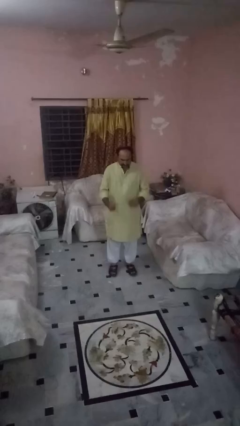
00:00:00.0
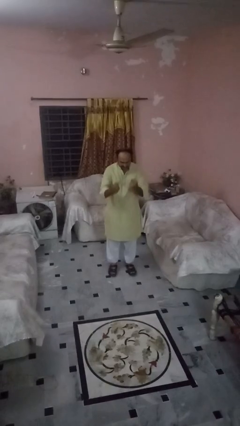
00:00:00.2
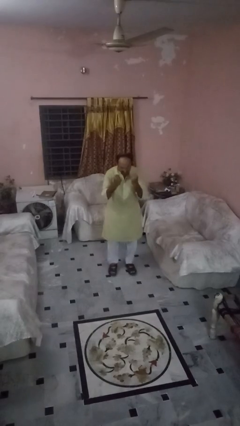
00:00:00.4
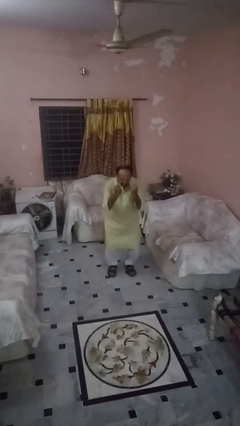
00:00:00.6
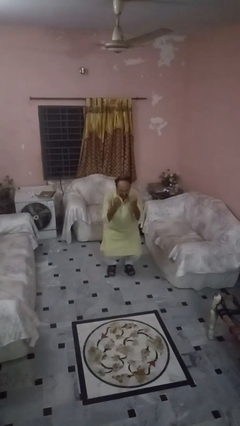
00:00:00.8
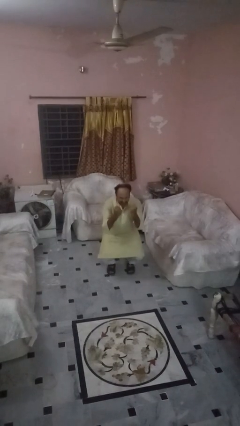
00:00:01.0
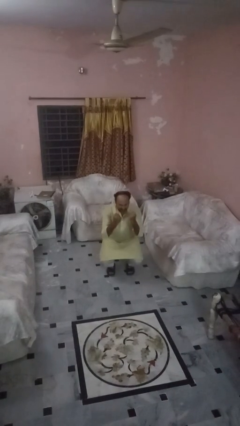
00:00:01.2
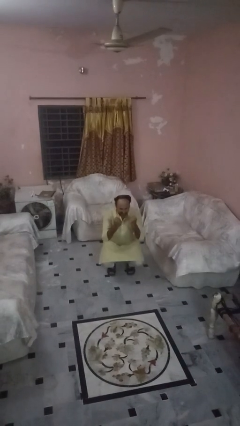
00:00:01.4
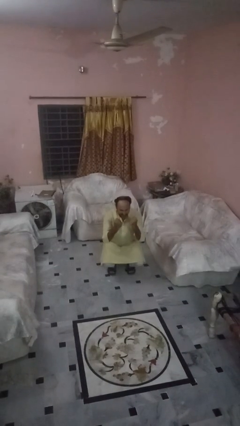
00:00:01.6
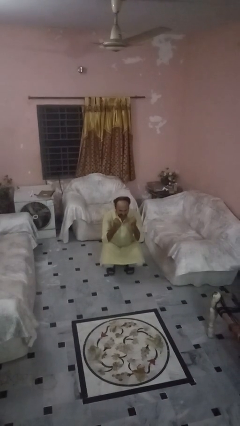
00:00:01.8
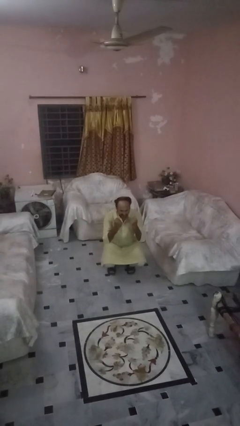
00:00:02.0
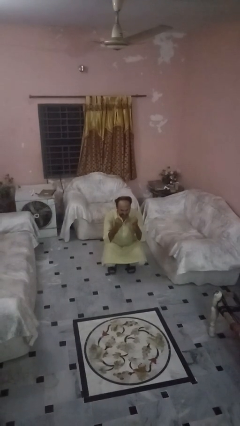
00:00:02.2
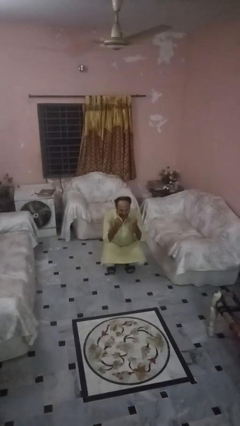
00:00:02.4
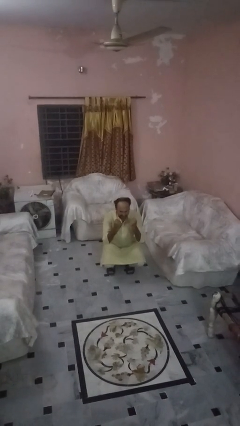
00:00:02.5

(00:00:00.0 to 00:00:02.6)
person squats

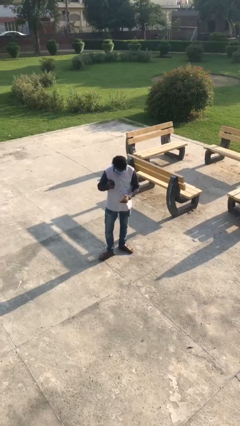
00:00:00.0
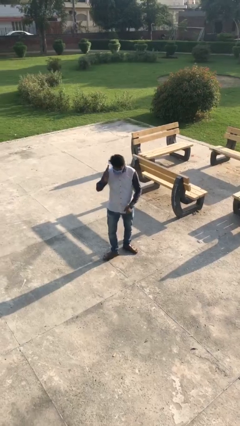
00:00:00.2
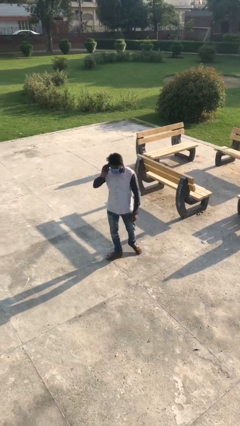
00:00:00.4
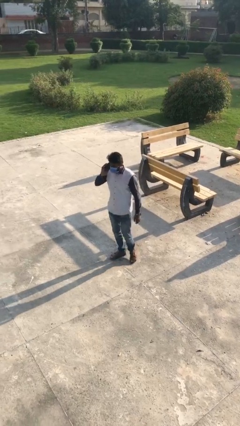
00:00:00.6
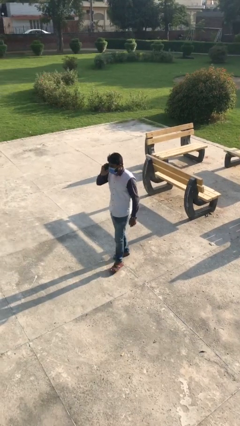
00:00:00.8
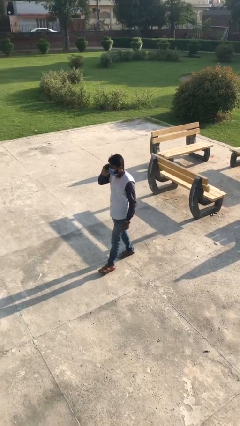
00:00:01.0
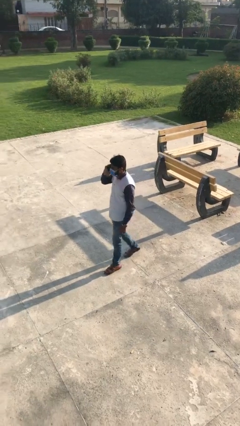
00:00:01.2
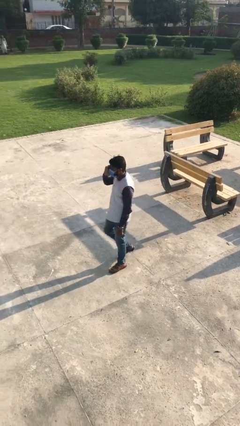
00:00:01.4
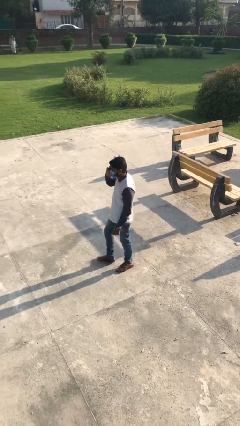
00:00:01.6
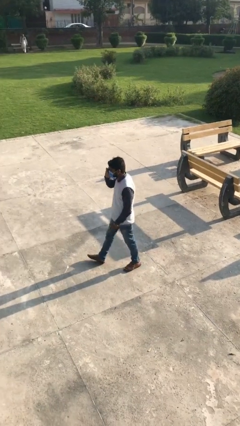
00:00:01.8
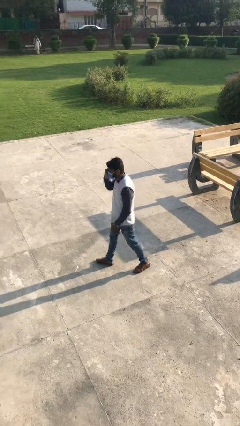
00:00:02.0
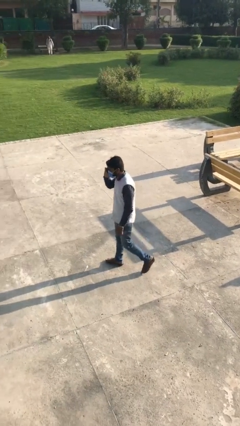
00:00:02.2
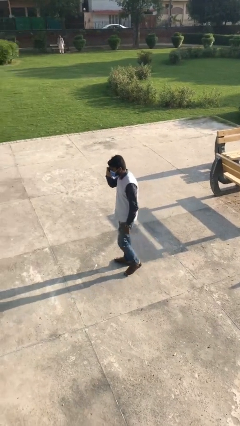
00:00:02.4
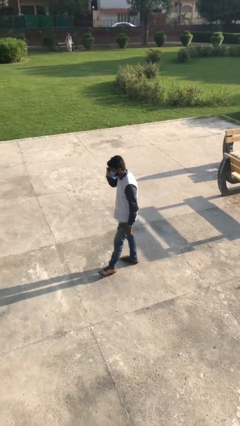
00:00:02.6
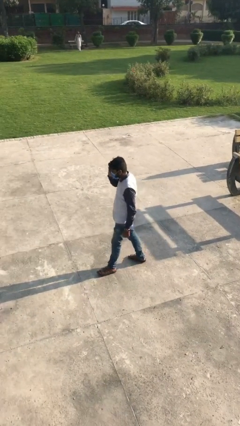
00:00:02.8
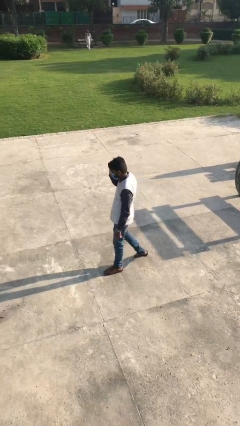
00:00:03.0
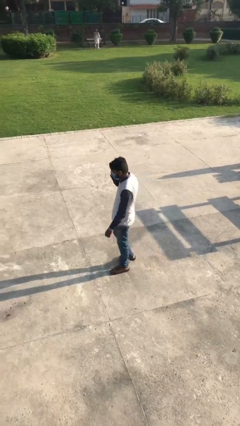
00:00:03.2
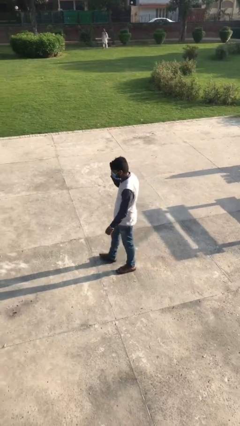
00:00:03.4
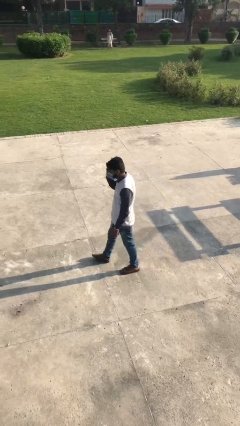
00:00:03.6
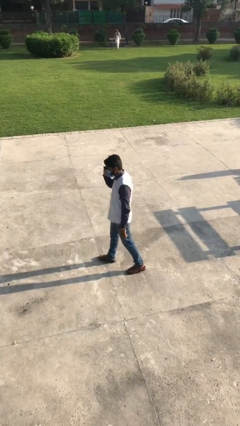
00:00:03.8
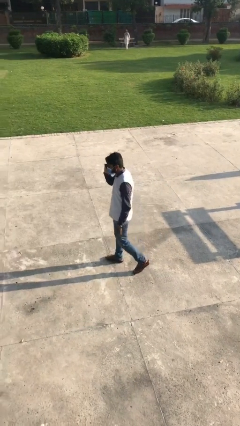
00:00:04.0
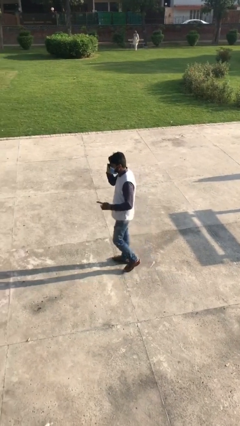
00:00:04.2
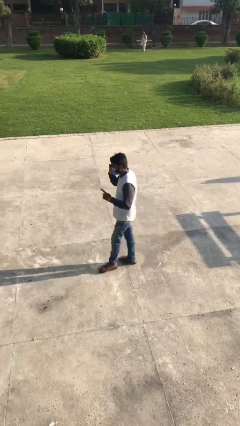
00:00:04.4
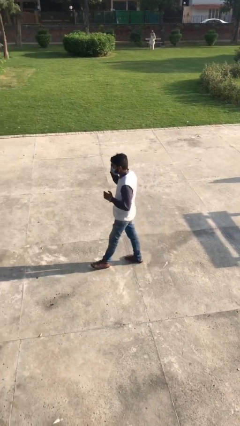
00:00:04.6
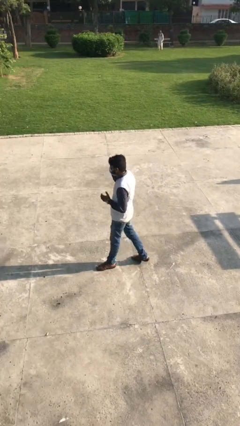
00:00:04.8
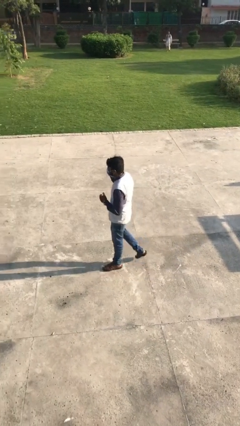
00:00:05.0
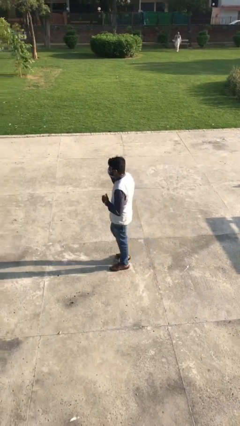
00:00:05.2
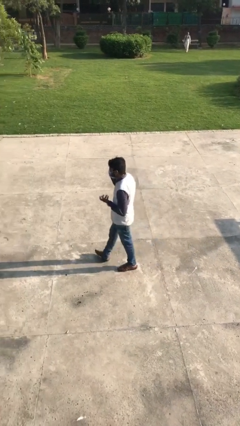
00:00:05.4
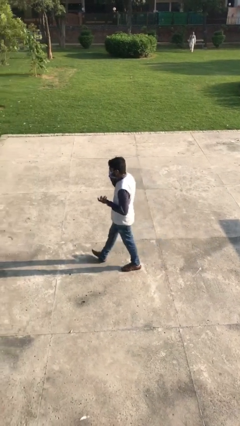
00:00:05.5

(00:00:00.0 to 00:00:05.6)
person talks on phone

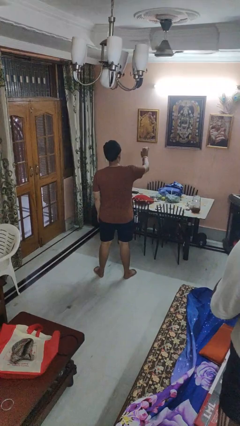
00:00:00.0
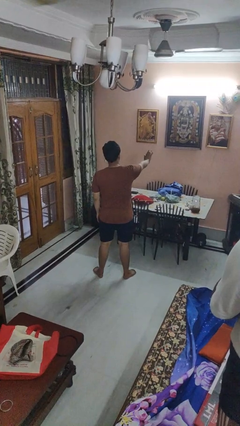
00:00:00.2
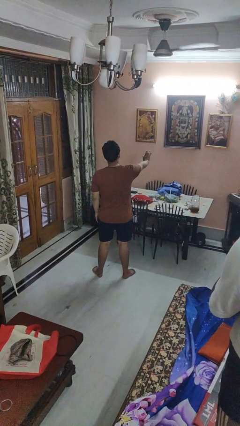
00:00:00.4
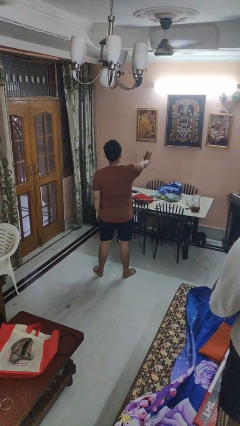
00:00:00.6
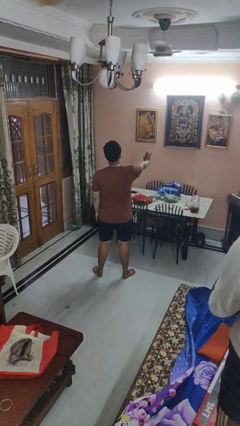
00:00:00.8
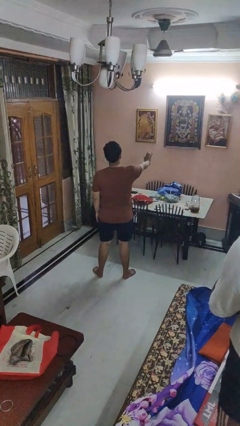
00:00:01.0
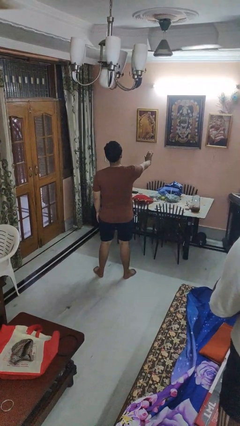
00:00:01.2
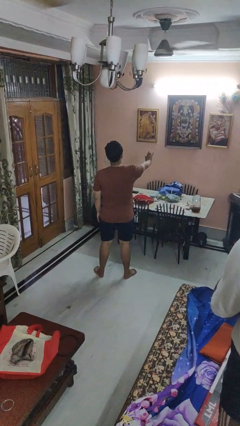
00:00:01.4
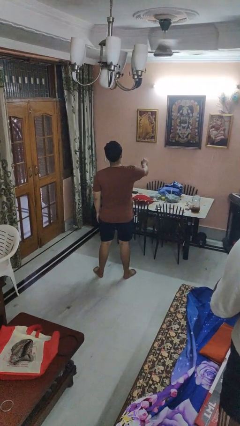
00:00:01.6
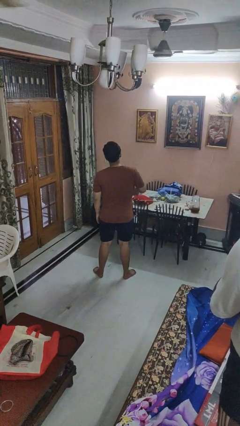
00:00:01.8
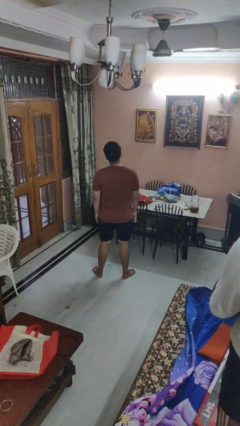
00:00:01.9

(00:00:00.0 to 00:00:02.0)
person gestures stop

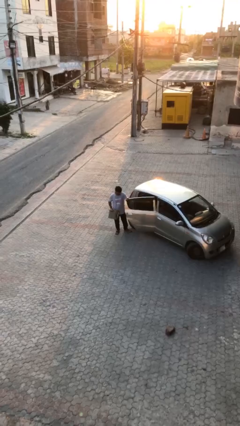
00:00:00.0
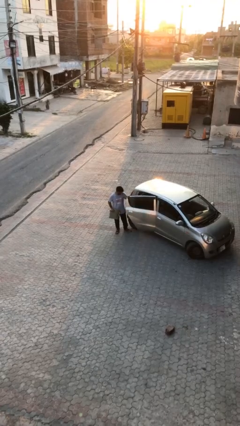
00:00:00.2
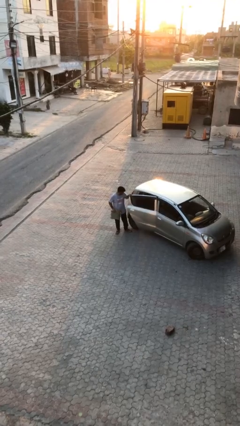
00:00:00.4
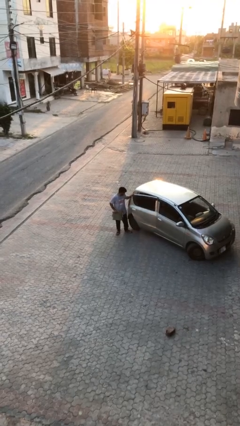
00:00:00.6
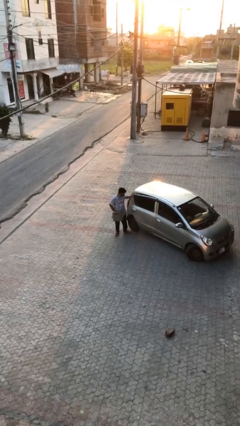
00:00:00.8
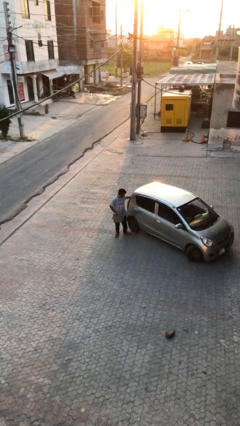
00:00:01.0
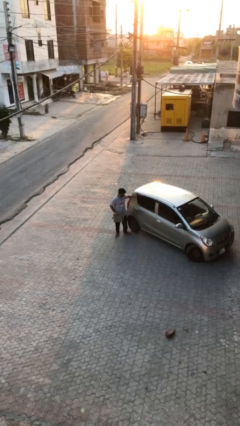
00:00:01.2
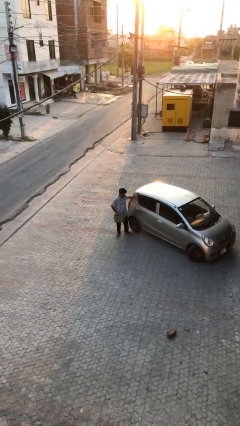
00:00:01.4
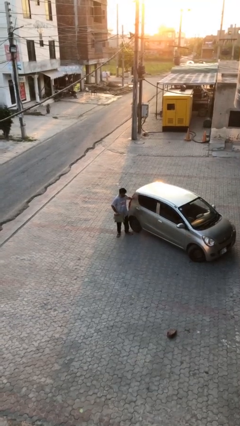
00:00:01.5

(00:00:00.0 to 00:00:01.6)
person closes car door

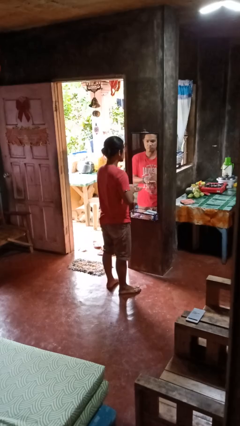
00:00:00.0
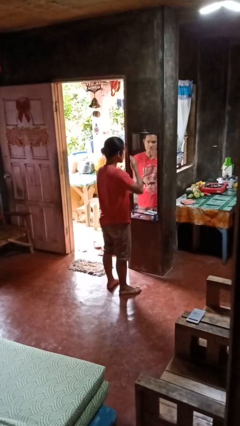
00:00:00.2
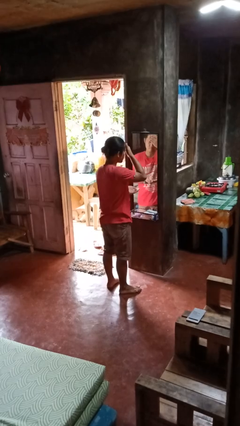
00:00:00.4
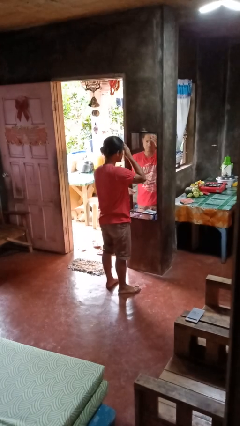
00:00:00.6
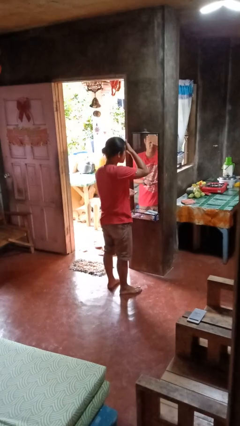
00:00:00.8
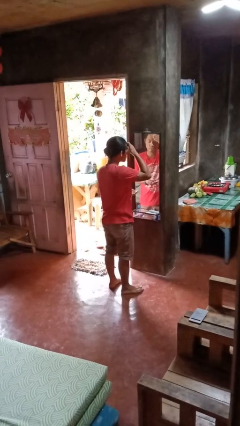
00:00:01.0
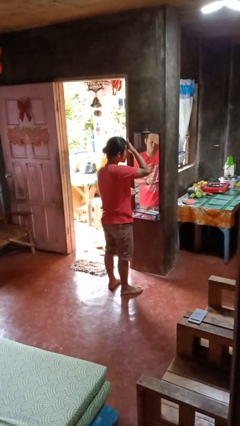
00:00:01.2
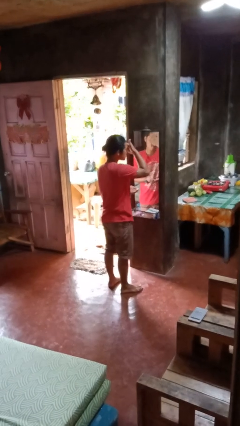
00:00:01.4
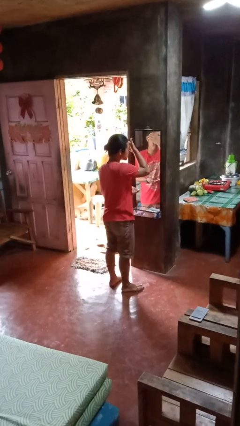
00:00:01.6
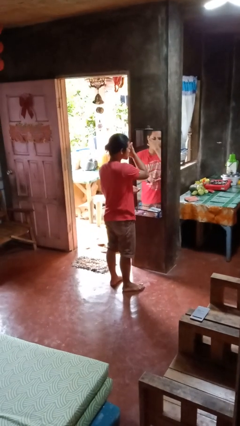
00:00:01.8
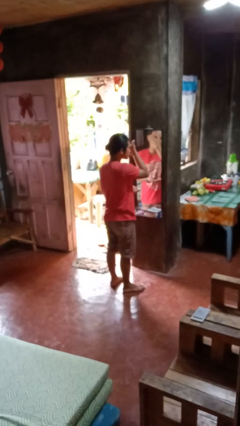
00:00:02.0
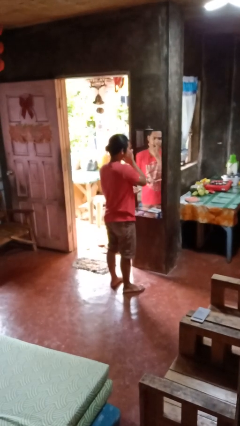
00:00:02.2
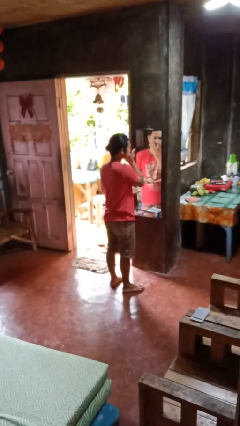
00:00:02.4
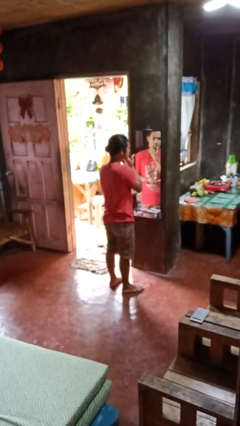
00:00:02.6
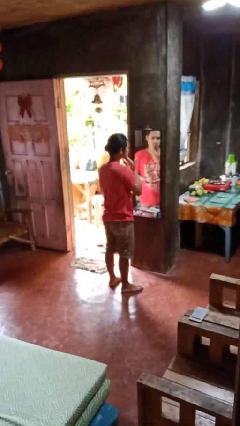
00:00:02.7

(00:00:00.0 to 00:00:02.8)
person applies foundation makeup

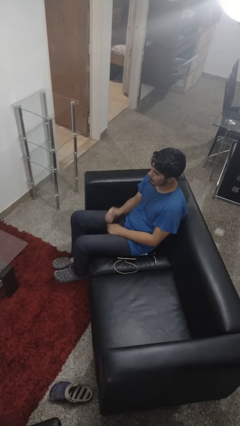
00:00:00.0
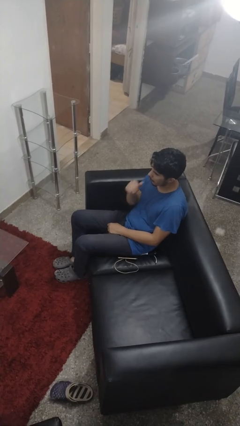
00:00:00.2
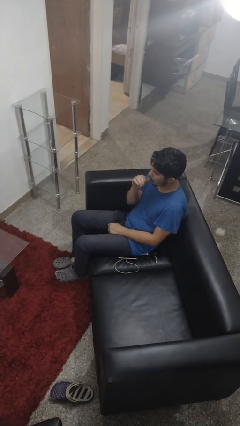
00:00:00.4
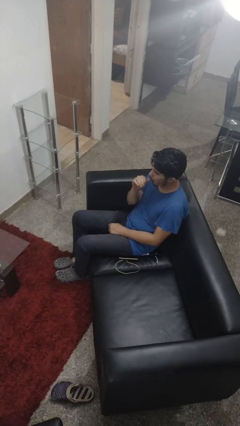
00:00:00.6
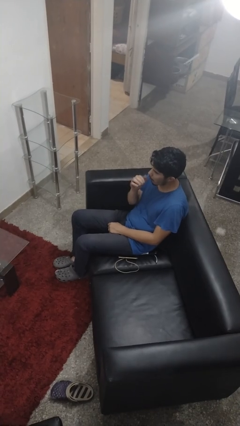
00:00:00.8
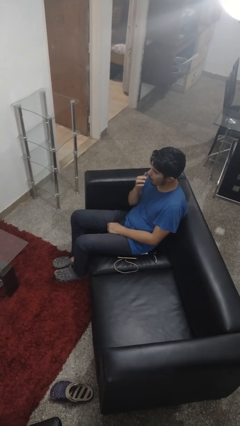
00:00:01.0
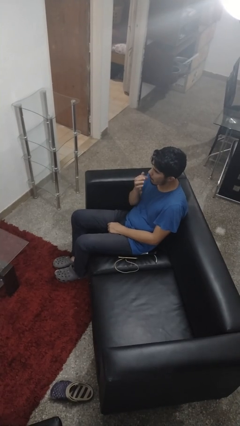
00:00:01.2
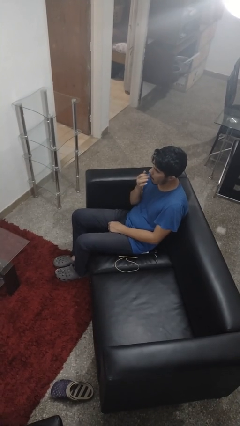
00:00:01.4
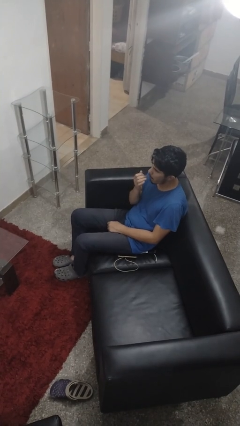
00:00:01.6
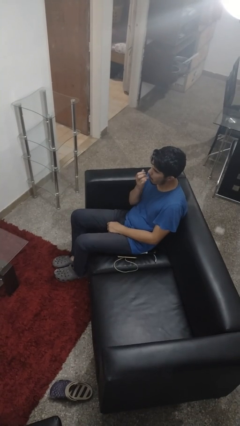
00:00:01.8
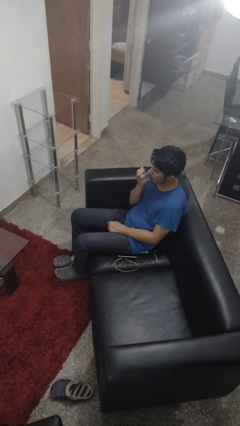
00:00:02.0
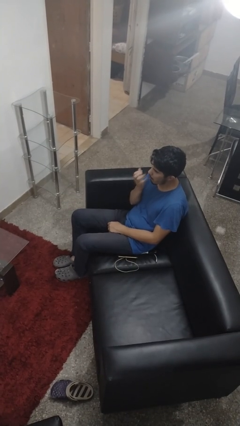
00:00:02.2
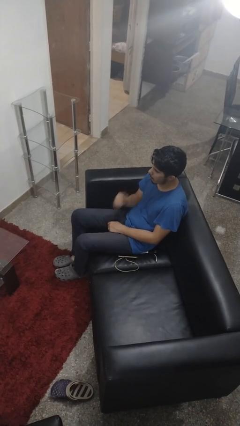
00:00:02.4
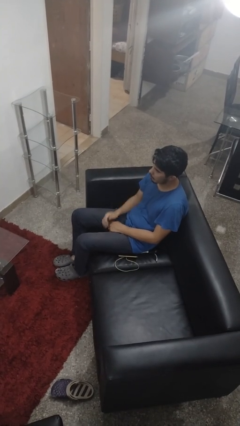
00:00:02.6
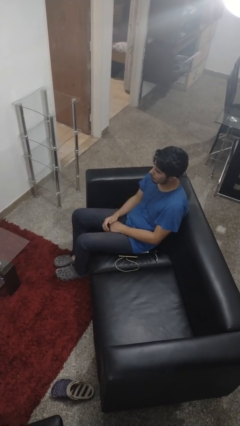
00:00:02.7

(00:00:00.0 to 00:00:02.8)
person licks fingers
